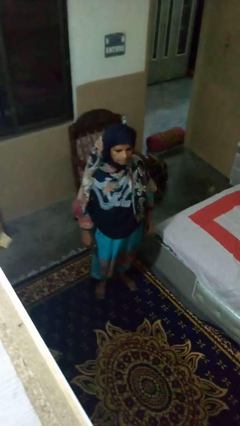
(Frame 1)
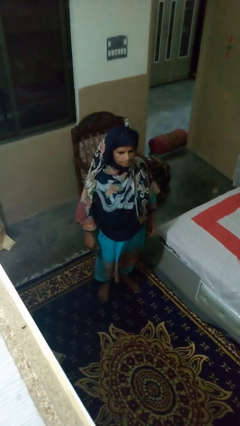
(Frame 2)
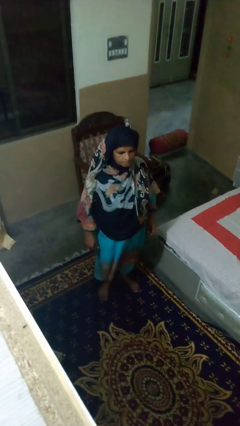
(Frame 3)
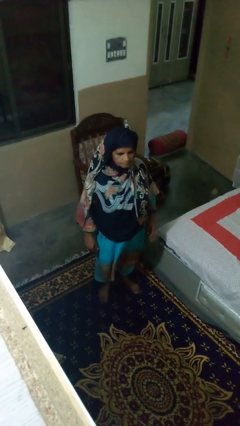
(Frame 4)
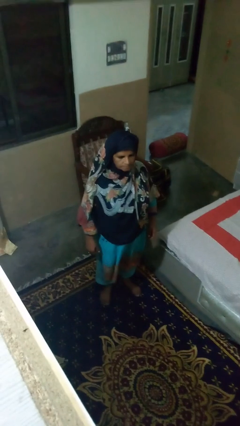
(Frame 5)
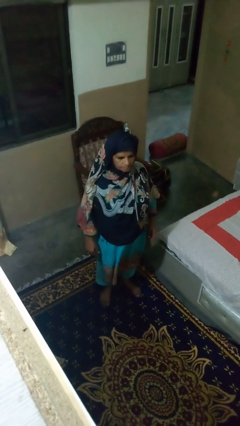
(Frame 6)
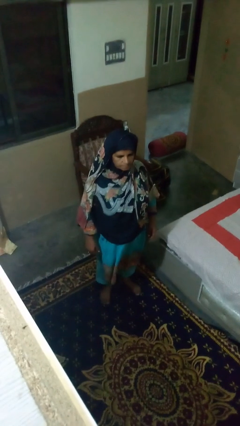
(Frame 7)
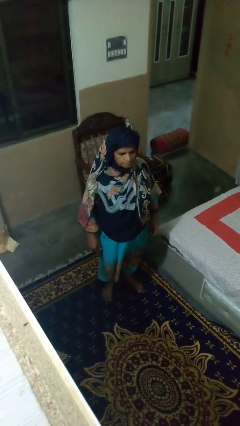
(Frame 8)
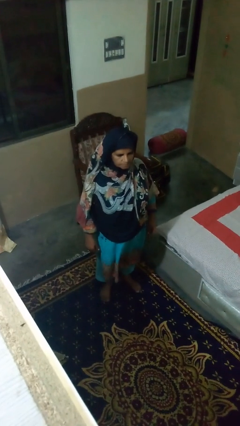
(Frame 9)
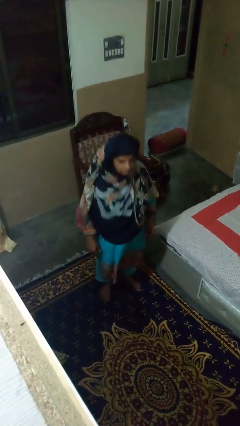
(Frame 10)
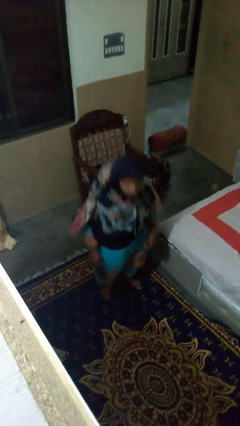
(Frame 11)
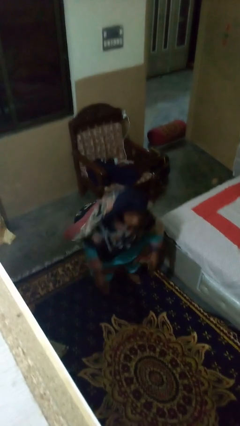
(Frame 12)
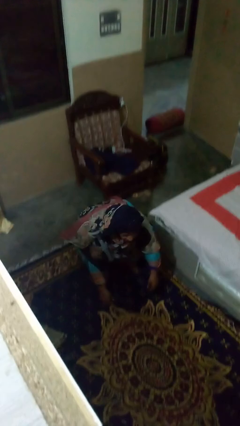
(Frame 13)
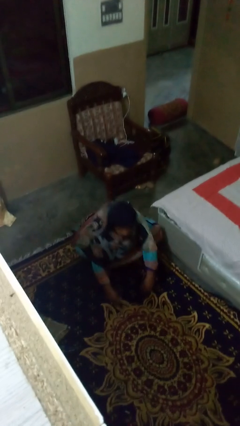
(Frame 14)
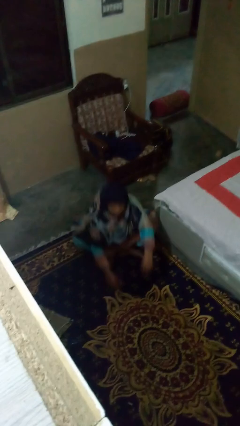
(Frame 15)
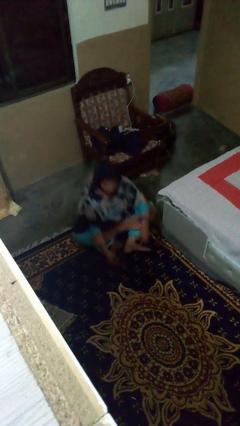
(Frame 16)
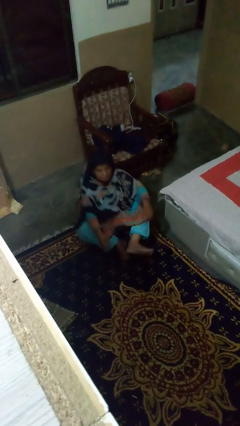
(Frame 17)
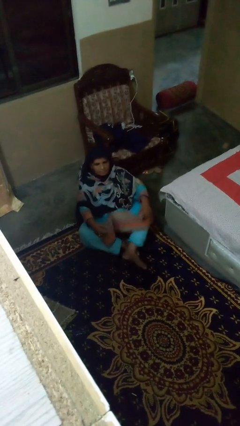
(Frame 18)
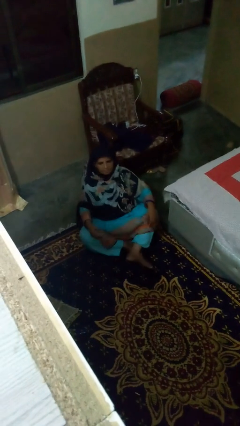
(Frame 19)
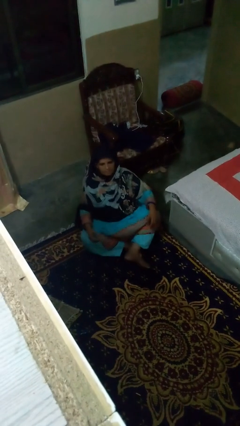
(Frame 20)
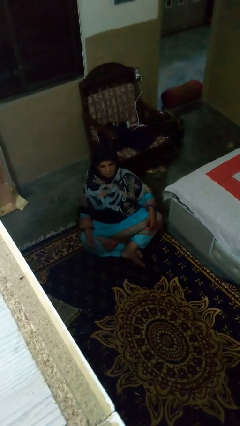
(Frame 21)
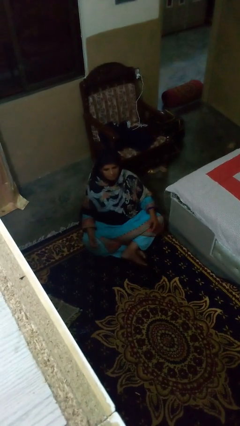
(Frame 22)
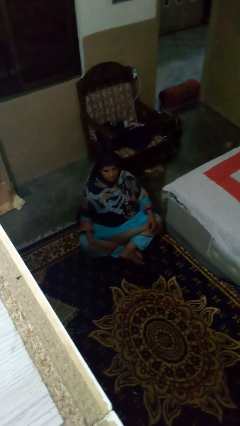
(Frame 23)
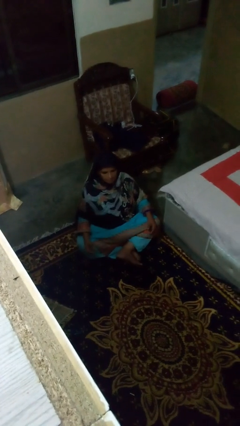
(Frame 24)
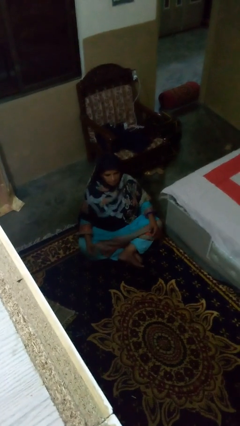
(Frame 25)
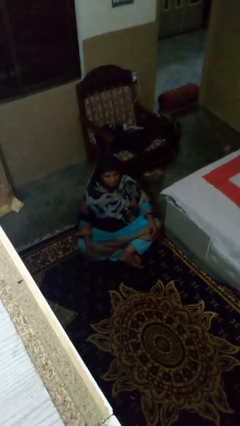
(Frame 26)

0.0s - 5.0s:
person sits crisscross

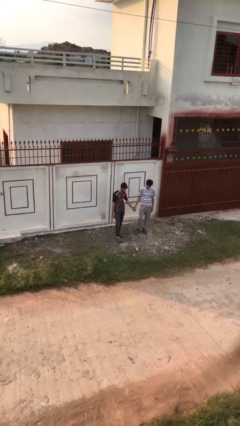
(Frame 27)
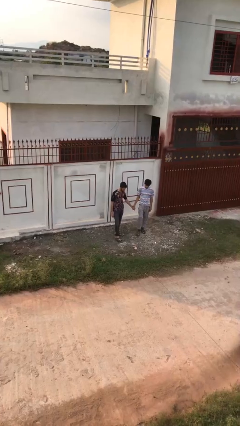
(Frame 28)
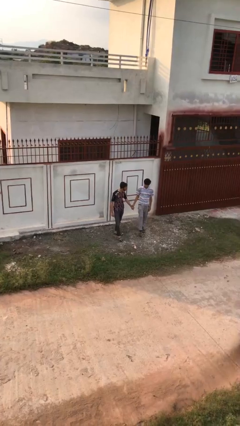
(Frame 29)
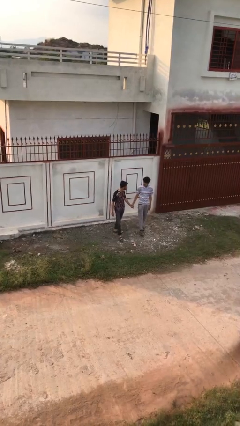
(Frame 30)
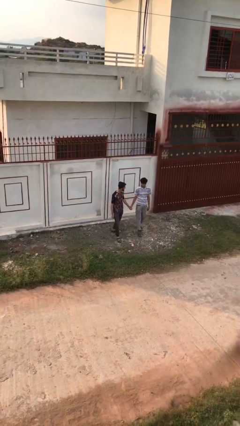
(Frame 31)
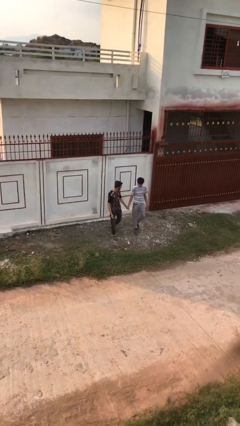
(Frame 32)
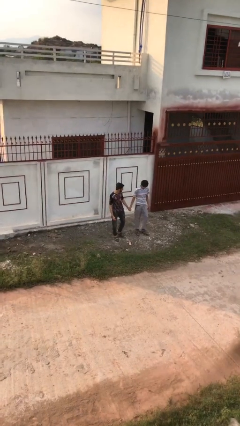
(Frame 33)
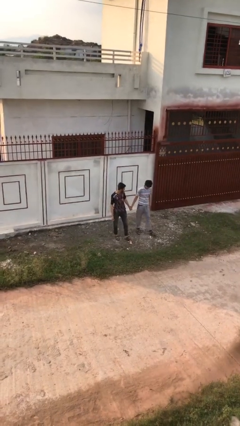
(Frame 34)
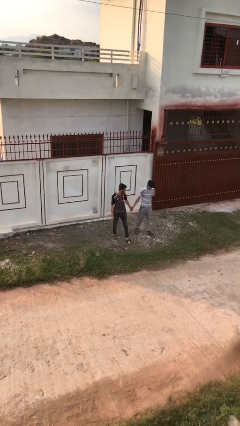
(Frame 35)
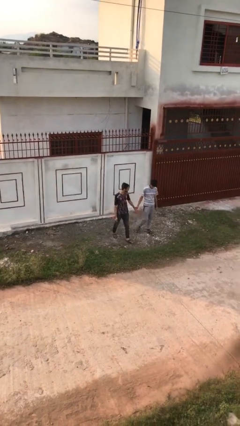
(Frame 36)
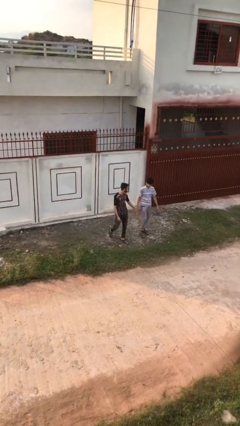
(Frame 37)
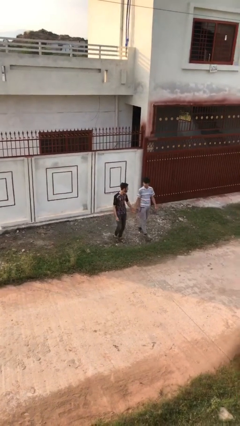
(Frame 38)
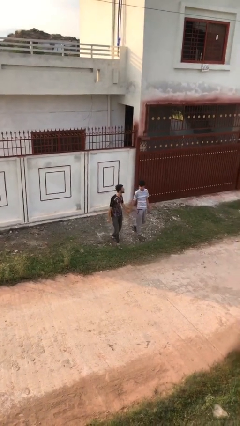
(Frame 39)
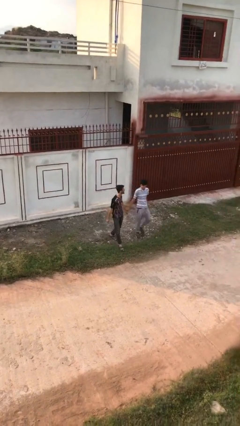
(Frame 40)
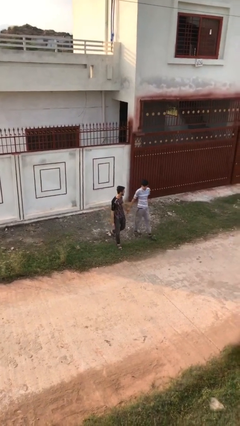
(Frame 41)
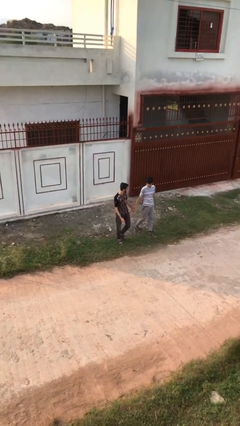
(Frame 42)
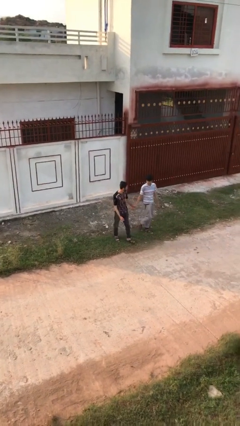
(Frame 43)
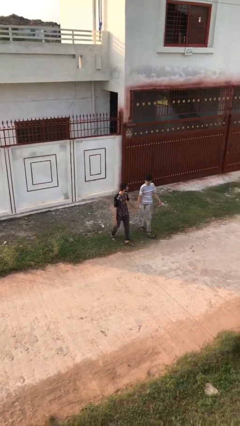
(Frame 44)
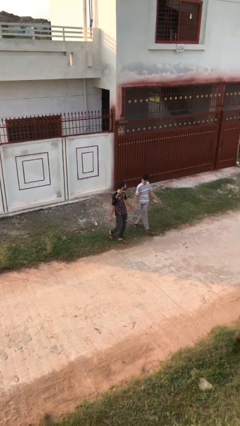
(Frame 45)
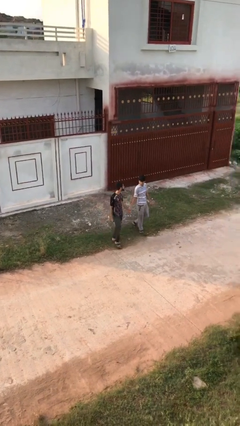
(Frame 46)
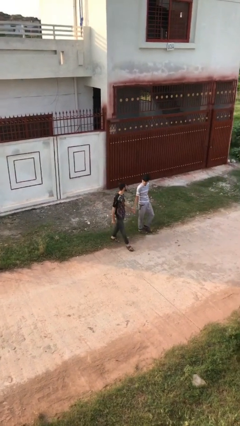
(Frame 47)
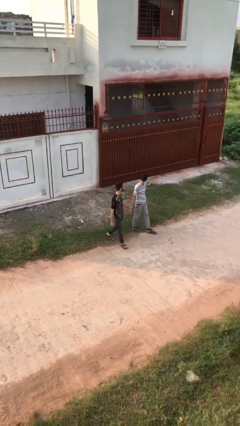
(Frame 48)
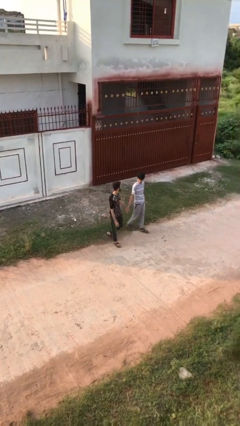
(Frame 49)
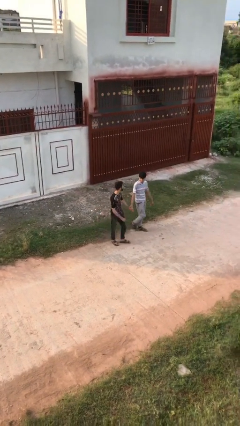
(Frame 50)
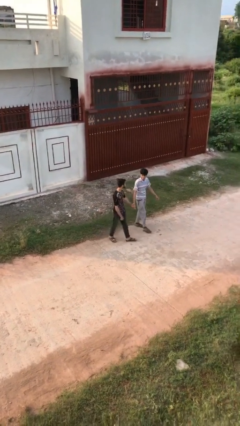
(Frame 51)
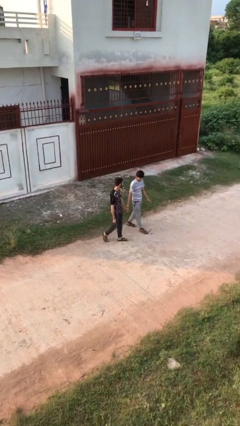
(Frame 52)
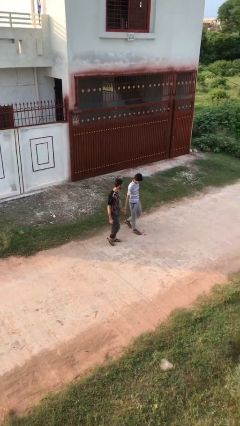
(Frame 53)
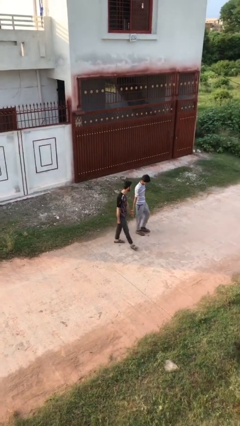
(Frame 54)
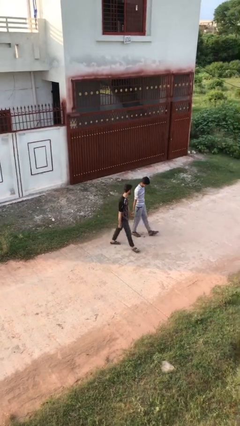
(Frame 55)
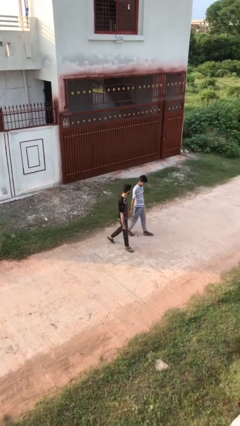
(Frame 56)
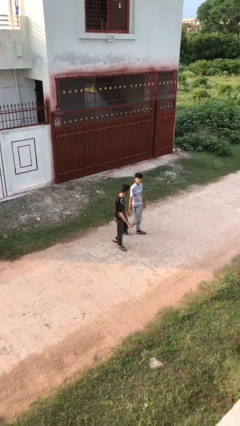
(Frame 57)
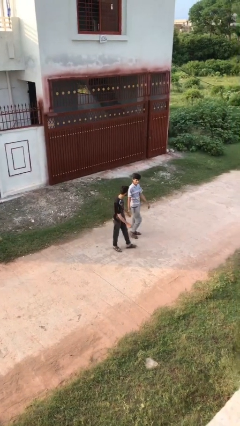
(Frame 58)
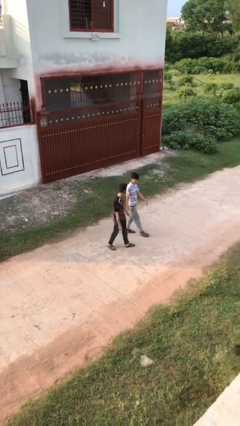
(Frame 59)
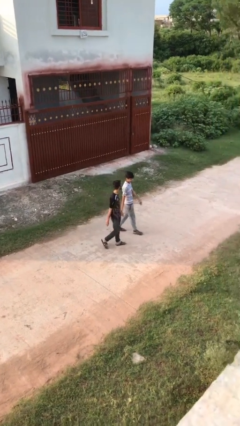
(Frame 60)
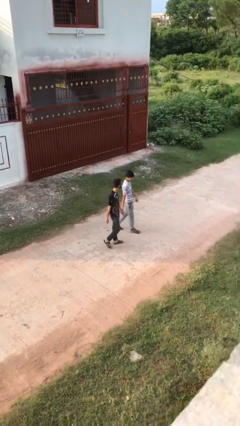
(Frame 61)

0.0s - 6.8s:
person holds hand

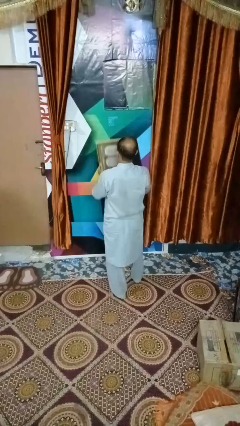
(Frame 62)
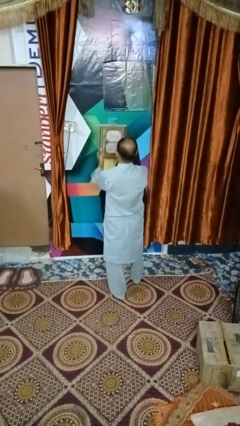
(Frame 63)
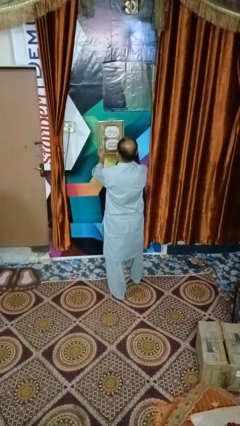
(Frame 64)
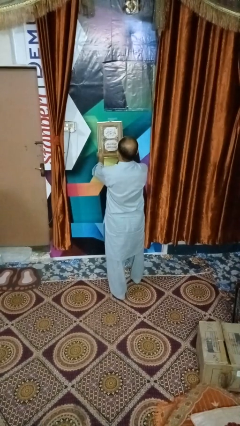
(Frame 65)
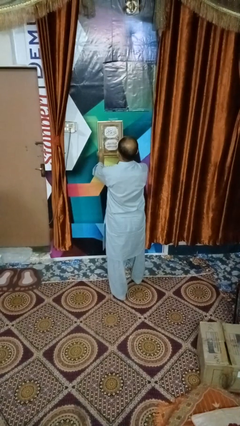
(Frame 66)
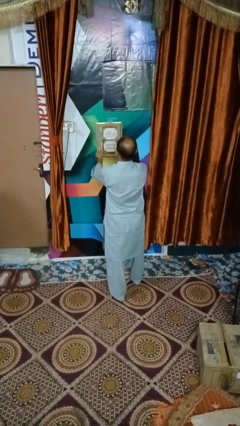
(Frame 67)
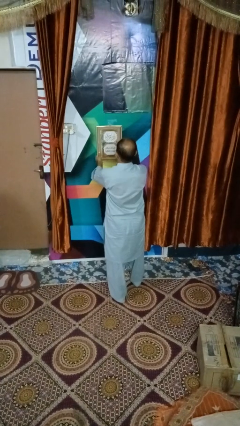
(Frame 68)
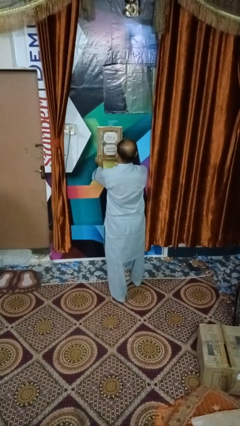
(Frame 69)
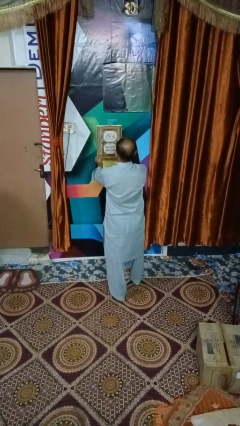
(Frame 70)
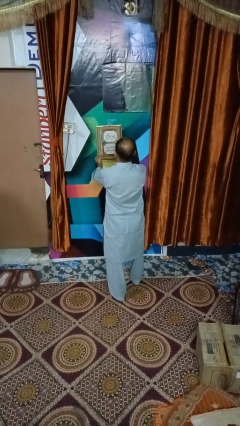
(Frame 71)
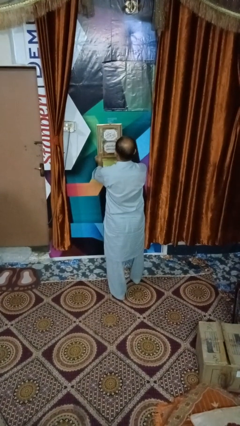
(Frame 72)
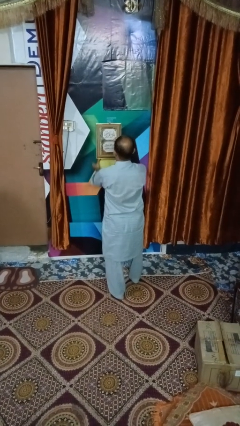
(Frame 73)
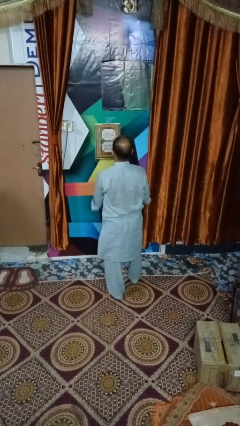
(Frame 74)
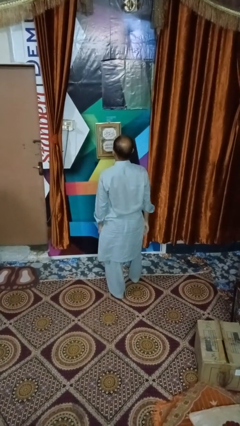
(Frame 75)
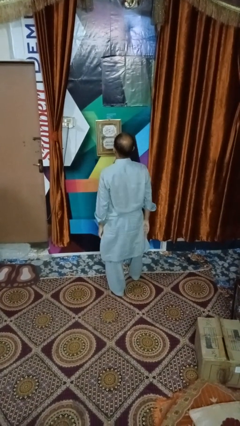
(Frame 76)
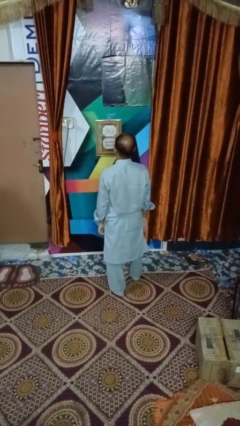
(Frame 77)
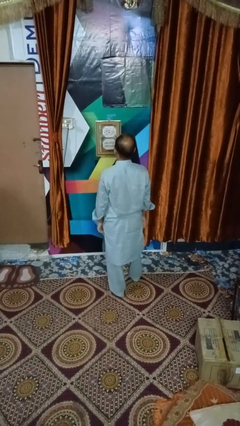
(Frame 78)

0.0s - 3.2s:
person puts up picture frame

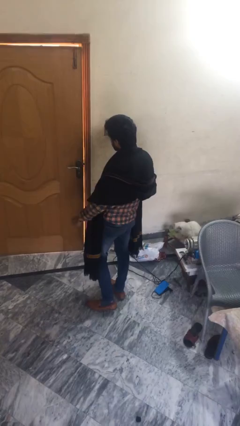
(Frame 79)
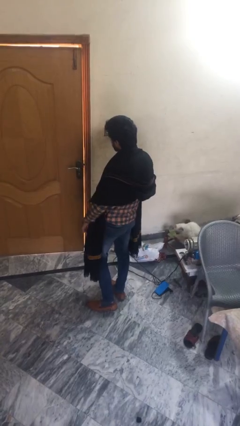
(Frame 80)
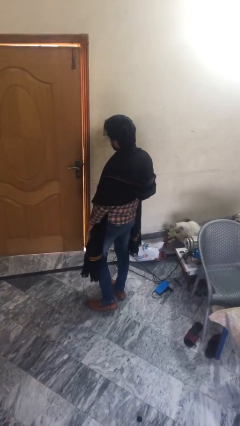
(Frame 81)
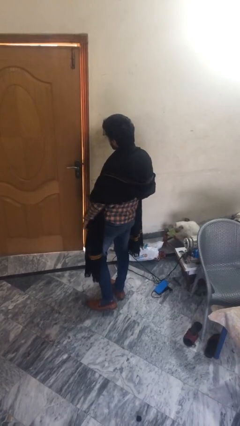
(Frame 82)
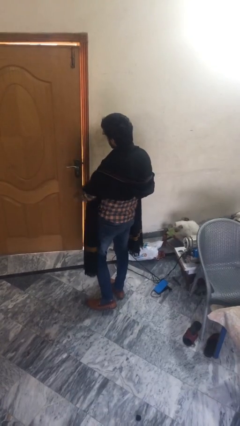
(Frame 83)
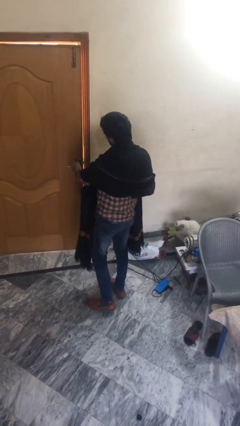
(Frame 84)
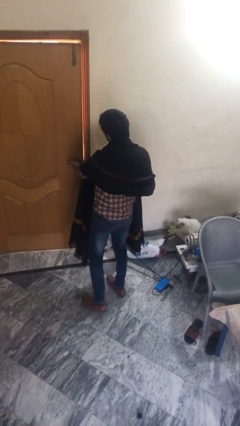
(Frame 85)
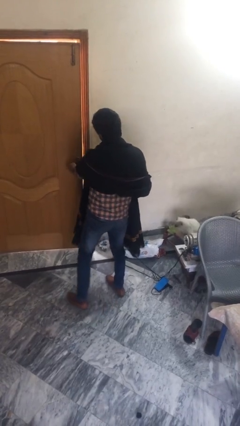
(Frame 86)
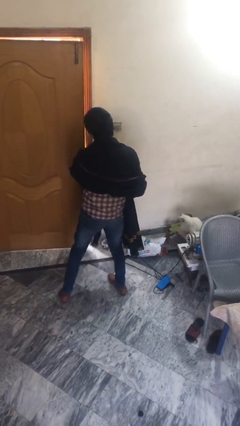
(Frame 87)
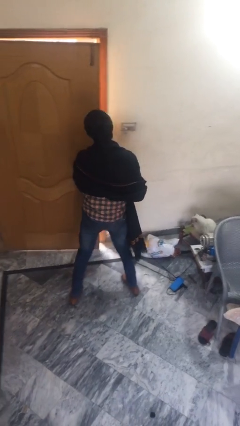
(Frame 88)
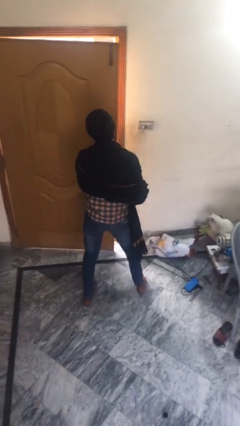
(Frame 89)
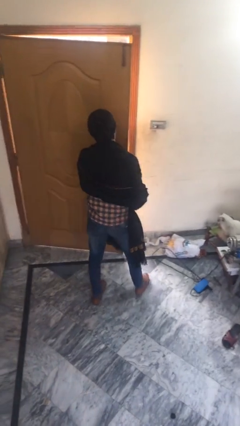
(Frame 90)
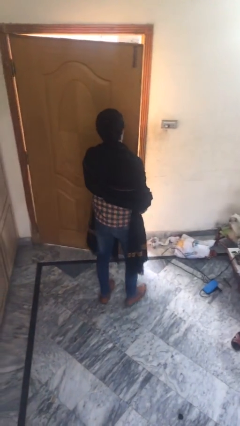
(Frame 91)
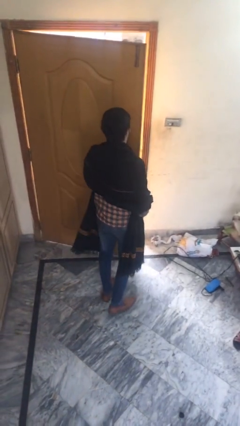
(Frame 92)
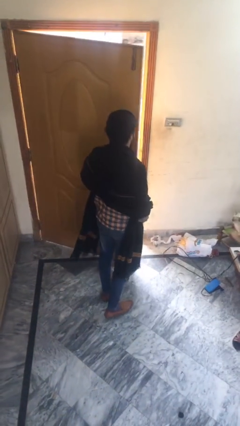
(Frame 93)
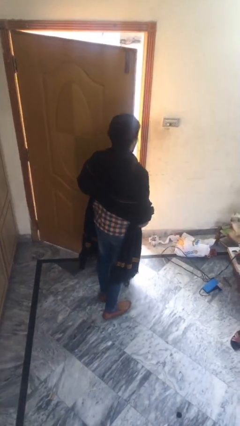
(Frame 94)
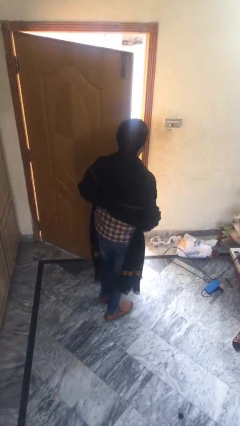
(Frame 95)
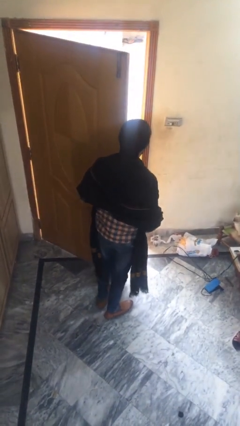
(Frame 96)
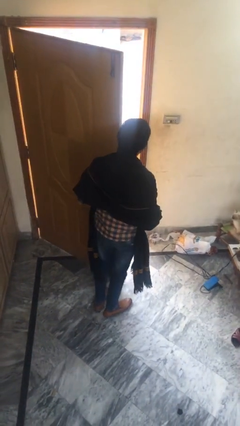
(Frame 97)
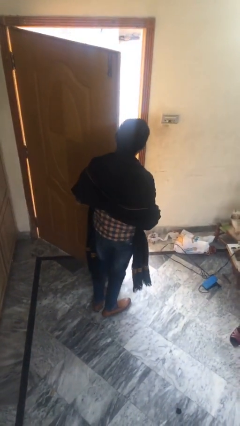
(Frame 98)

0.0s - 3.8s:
person opens facility door
